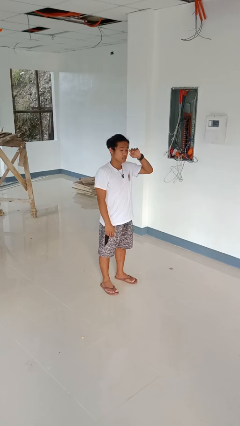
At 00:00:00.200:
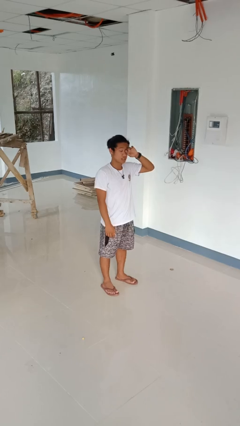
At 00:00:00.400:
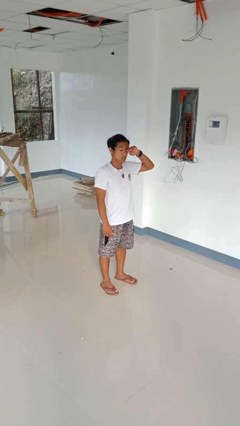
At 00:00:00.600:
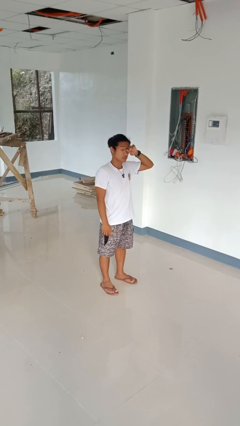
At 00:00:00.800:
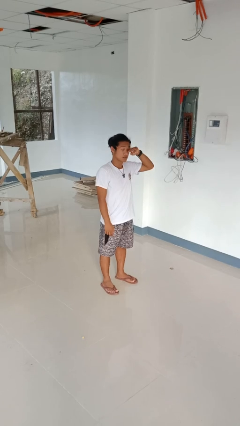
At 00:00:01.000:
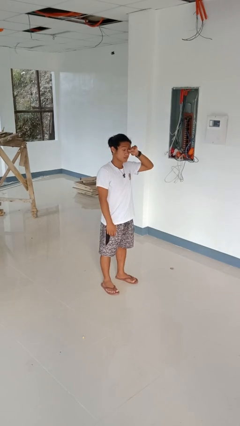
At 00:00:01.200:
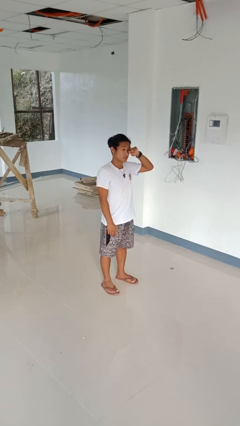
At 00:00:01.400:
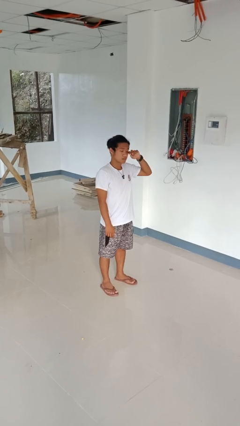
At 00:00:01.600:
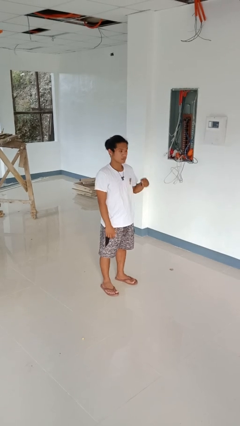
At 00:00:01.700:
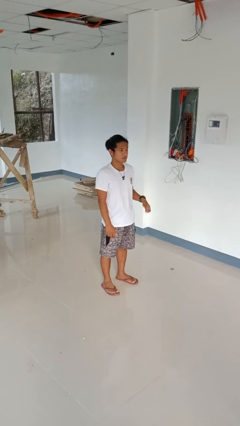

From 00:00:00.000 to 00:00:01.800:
person rubs eyes

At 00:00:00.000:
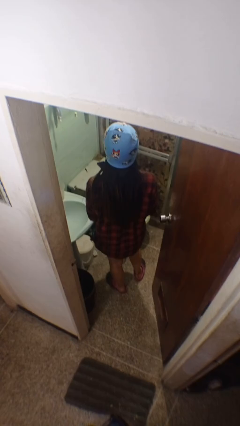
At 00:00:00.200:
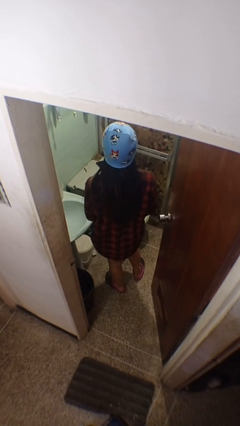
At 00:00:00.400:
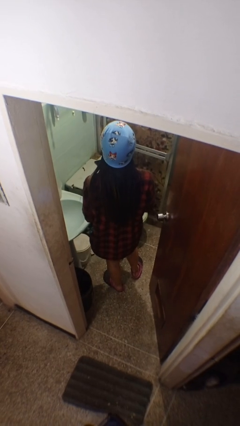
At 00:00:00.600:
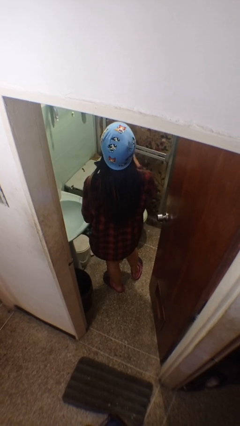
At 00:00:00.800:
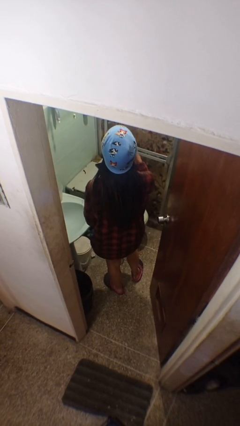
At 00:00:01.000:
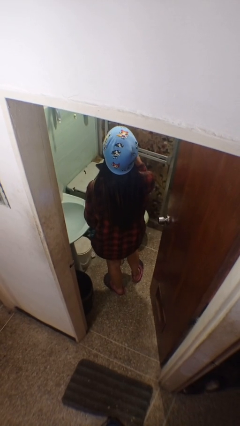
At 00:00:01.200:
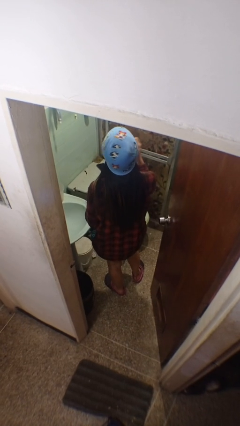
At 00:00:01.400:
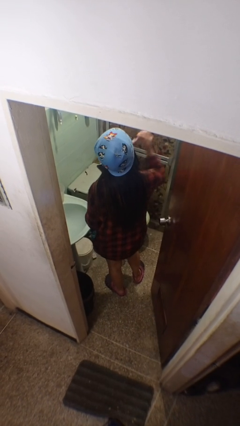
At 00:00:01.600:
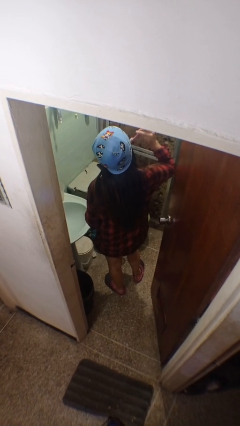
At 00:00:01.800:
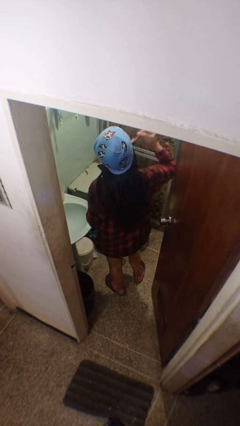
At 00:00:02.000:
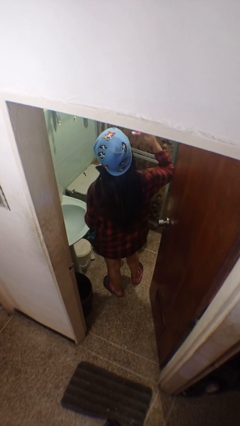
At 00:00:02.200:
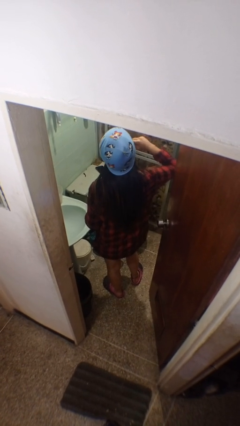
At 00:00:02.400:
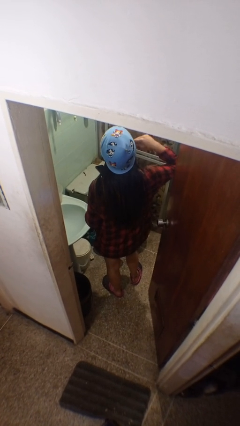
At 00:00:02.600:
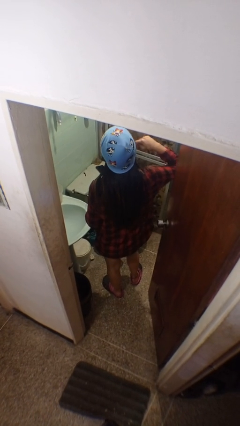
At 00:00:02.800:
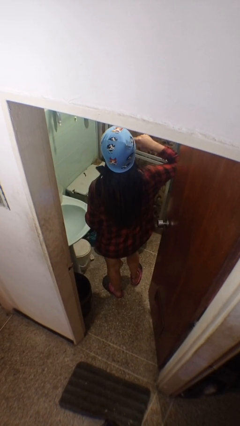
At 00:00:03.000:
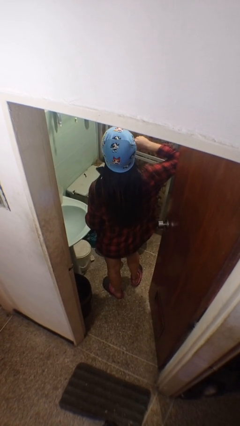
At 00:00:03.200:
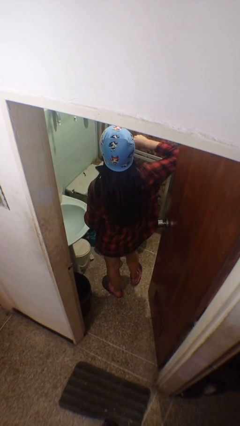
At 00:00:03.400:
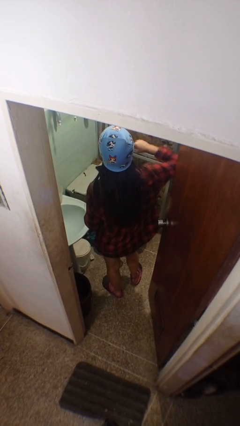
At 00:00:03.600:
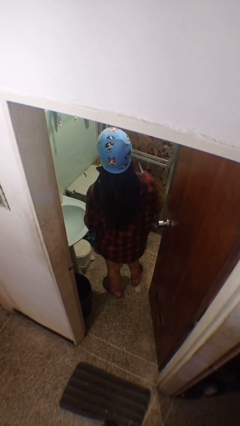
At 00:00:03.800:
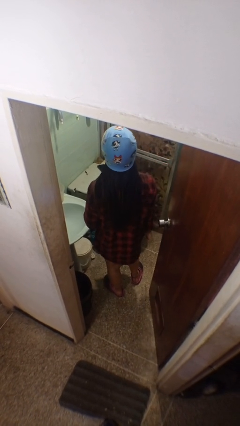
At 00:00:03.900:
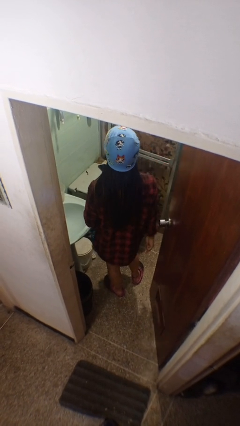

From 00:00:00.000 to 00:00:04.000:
person brushes teeth

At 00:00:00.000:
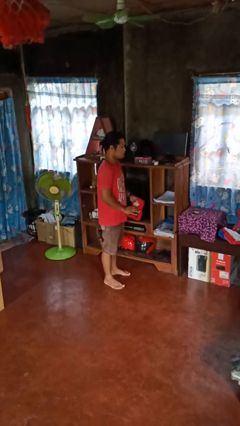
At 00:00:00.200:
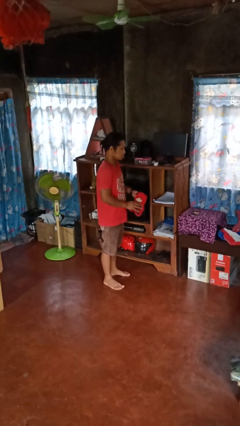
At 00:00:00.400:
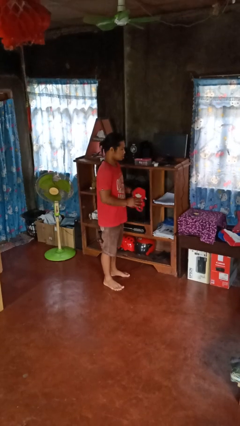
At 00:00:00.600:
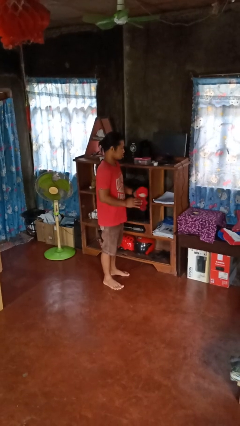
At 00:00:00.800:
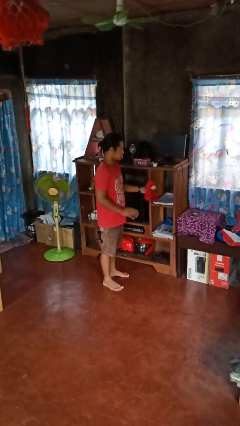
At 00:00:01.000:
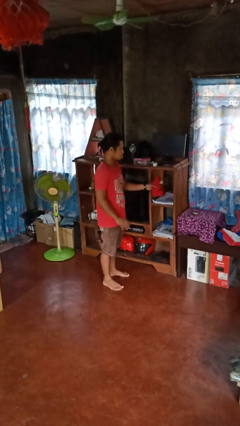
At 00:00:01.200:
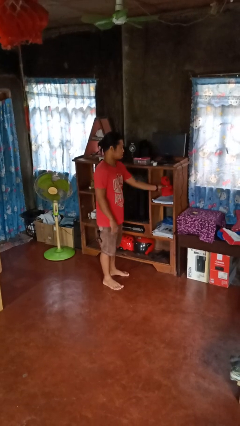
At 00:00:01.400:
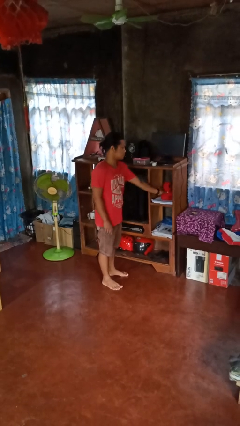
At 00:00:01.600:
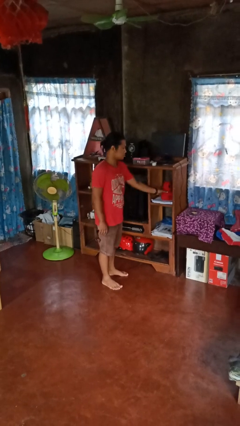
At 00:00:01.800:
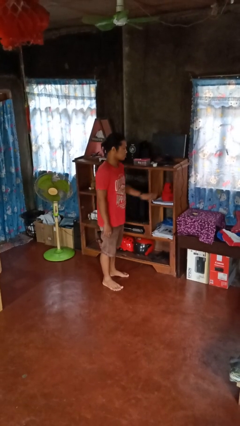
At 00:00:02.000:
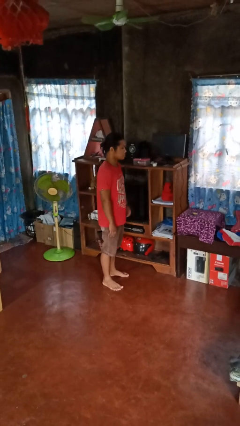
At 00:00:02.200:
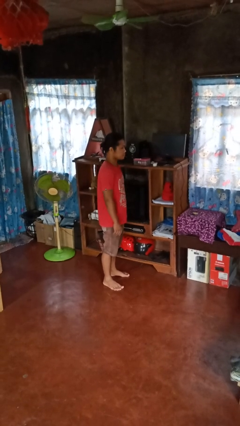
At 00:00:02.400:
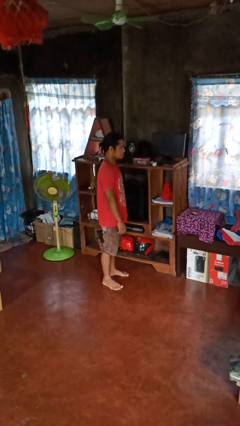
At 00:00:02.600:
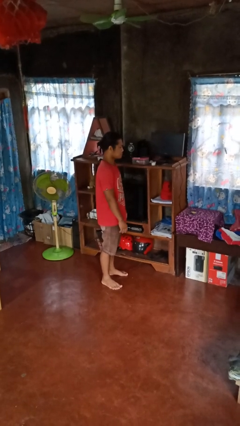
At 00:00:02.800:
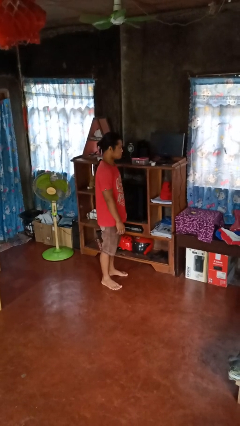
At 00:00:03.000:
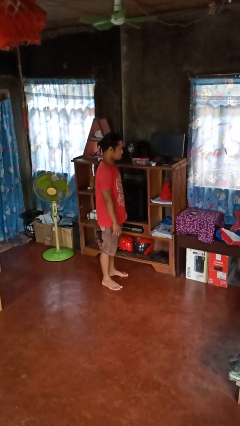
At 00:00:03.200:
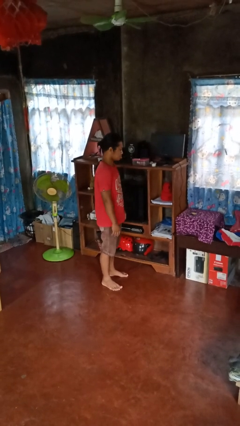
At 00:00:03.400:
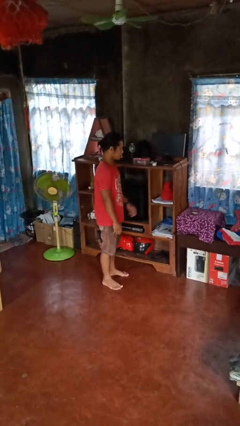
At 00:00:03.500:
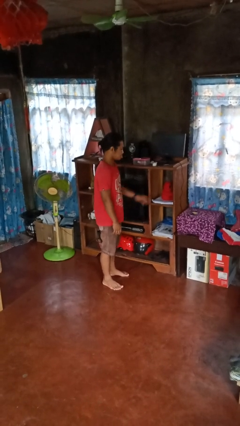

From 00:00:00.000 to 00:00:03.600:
person puts down object on shelf

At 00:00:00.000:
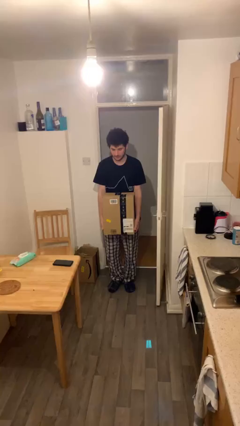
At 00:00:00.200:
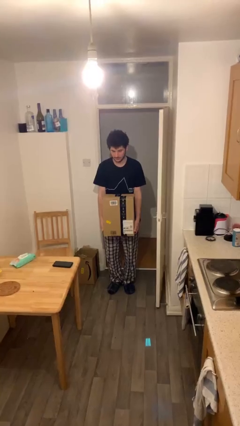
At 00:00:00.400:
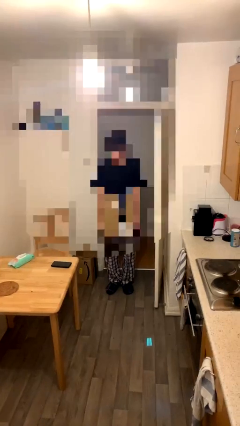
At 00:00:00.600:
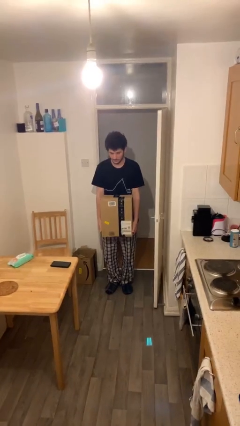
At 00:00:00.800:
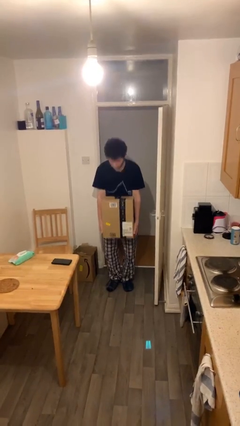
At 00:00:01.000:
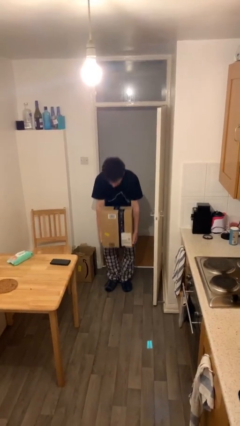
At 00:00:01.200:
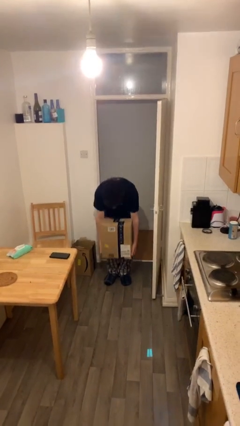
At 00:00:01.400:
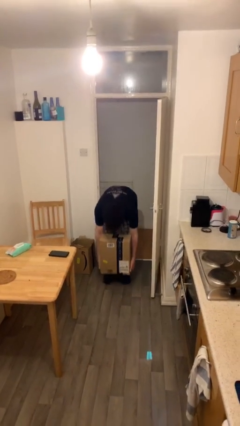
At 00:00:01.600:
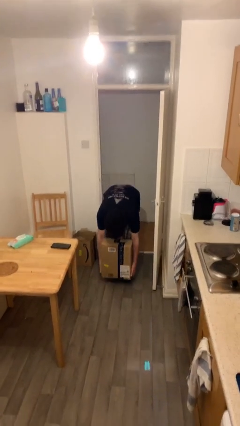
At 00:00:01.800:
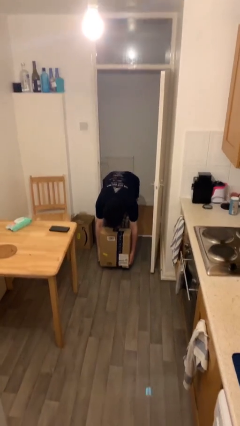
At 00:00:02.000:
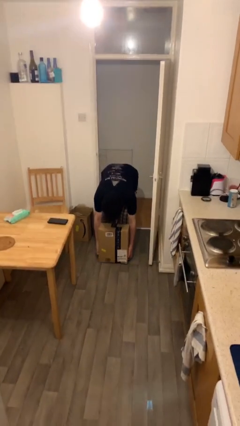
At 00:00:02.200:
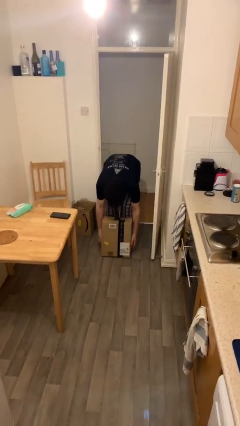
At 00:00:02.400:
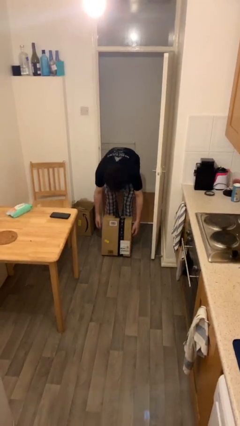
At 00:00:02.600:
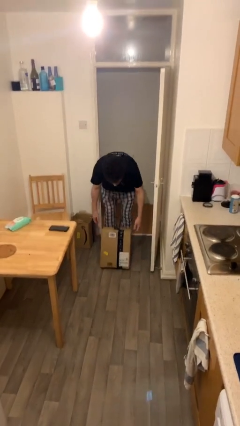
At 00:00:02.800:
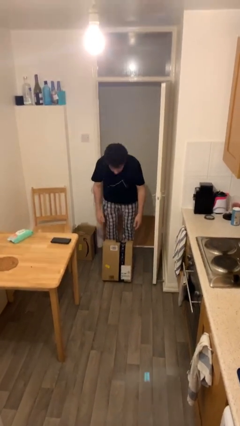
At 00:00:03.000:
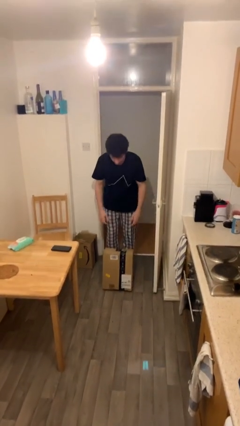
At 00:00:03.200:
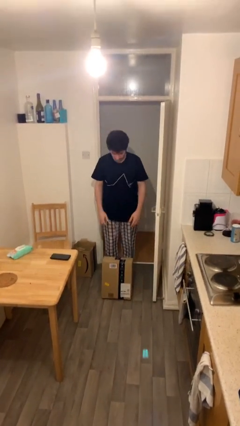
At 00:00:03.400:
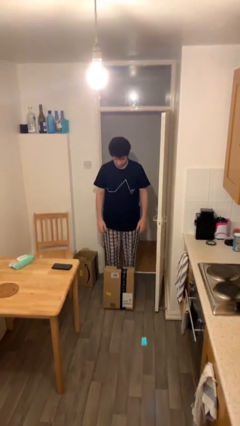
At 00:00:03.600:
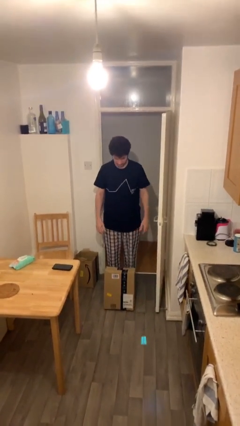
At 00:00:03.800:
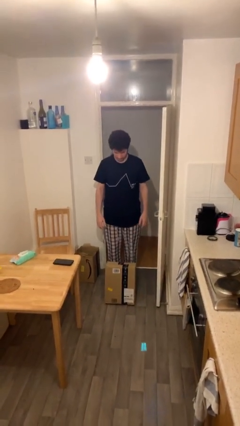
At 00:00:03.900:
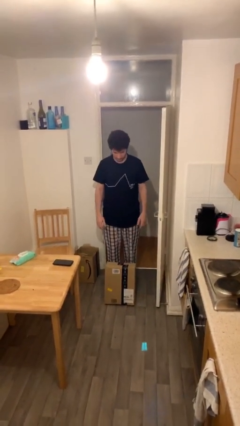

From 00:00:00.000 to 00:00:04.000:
person puts down object on floor

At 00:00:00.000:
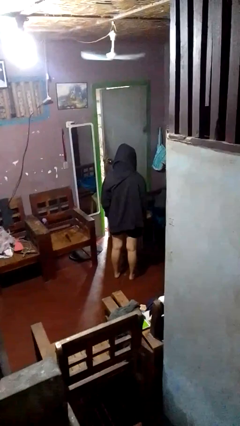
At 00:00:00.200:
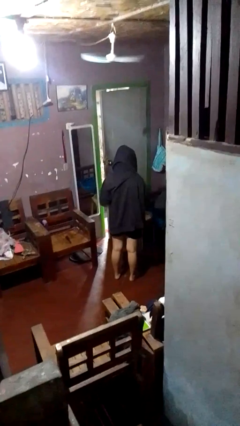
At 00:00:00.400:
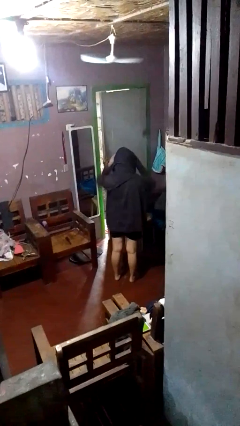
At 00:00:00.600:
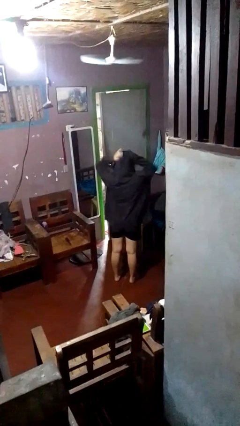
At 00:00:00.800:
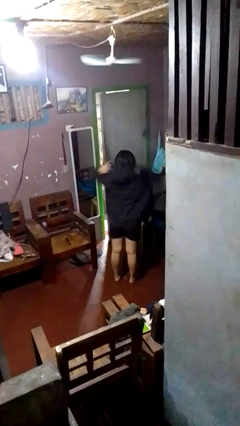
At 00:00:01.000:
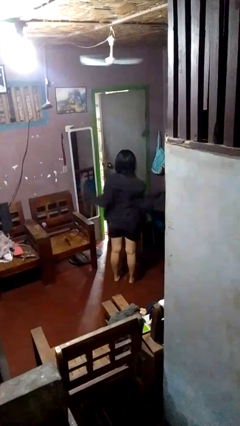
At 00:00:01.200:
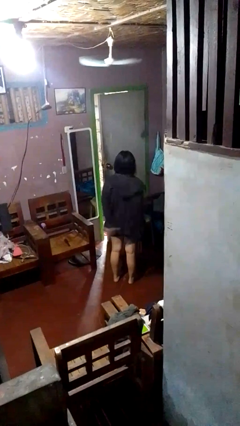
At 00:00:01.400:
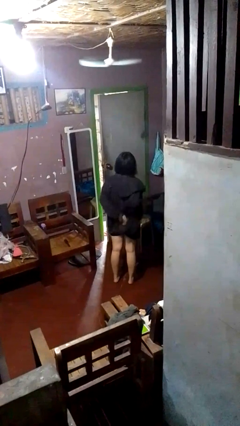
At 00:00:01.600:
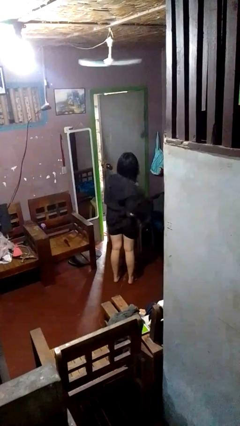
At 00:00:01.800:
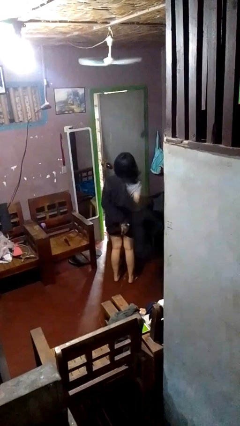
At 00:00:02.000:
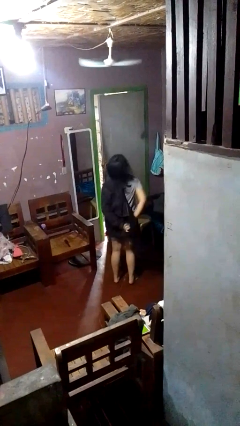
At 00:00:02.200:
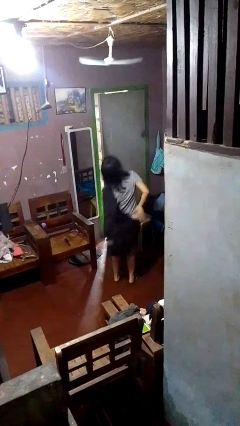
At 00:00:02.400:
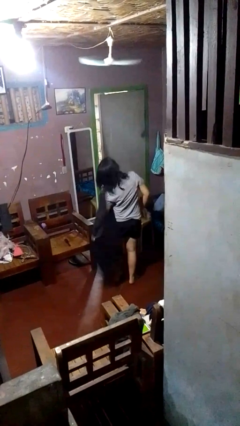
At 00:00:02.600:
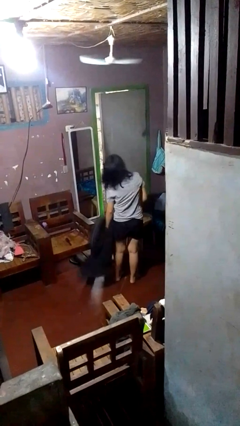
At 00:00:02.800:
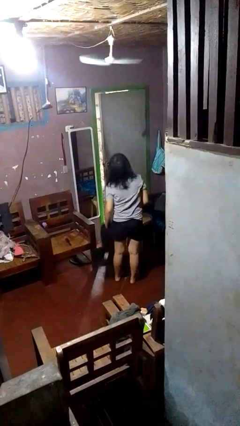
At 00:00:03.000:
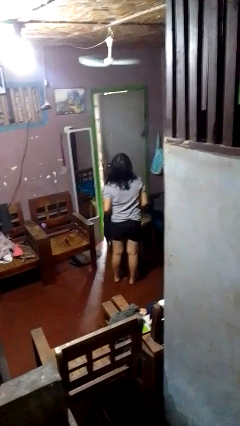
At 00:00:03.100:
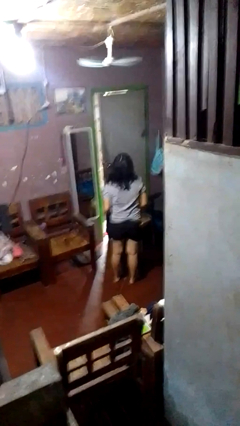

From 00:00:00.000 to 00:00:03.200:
person takes off hoodie

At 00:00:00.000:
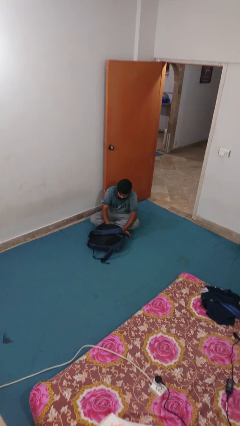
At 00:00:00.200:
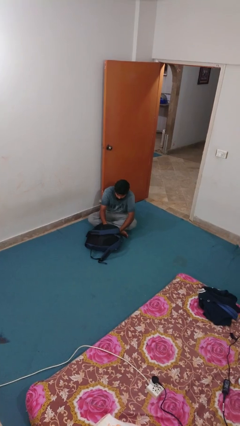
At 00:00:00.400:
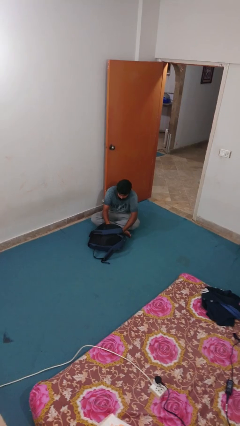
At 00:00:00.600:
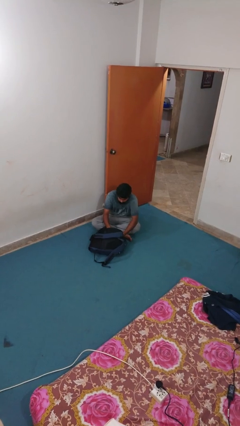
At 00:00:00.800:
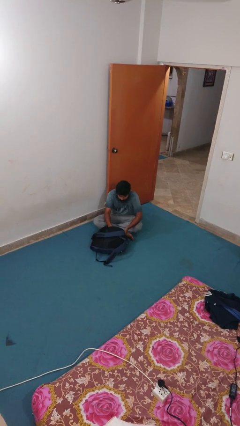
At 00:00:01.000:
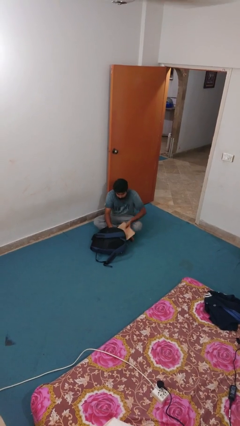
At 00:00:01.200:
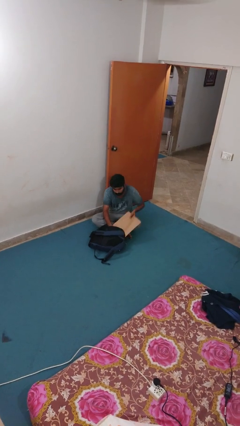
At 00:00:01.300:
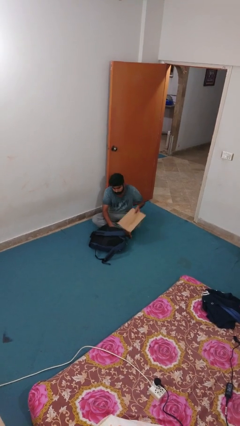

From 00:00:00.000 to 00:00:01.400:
person takes object from backpack
